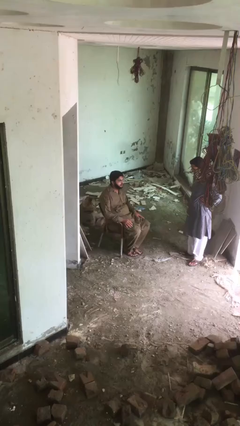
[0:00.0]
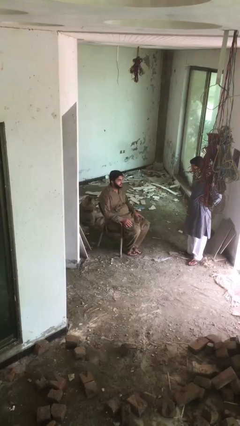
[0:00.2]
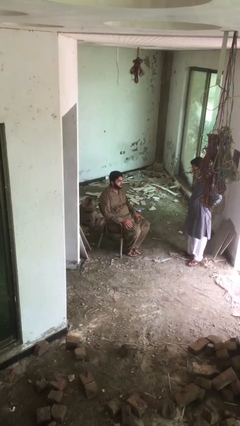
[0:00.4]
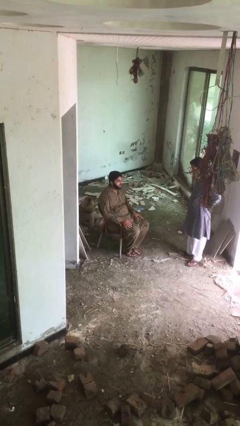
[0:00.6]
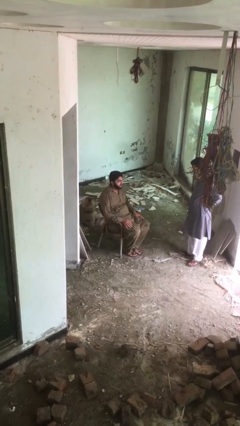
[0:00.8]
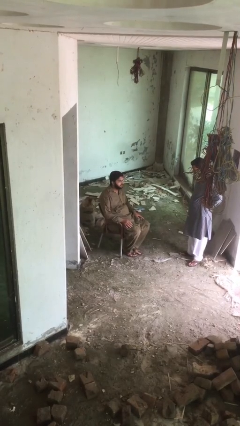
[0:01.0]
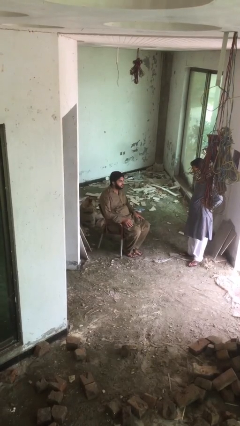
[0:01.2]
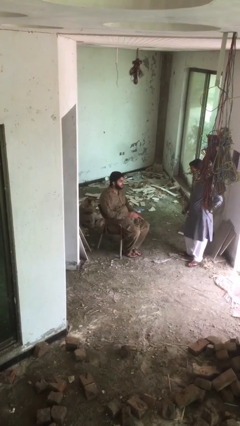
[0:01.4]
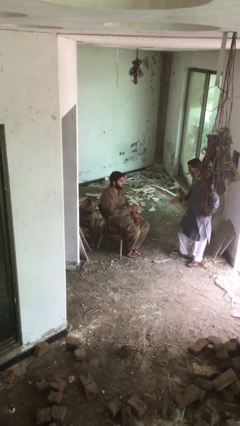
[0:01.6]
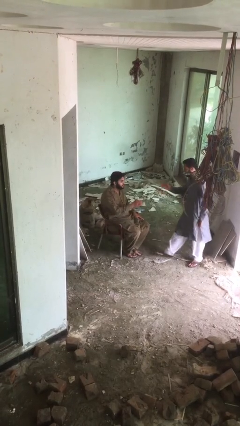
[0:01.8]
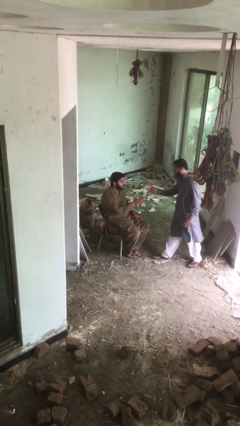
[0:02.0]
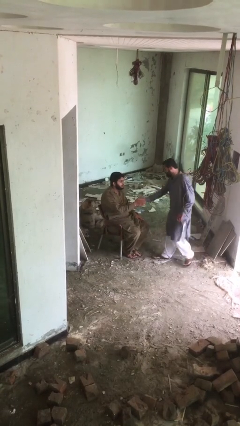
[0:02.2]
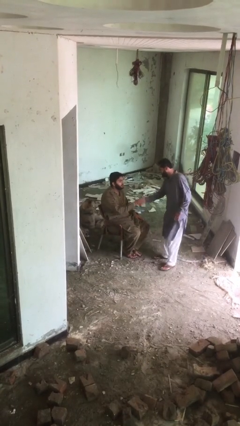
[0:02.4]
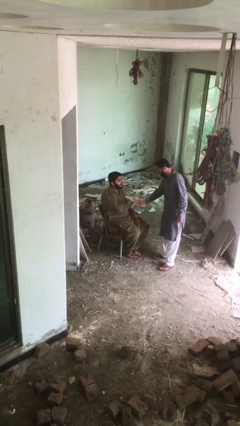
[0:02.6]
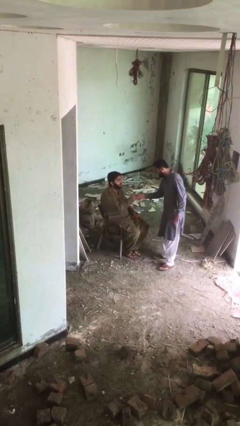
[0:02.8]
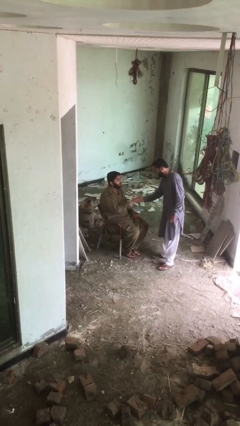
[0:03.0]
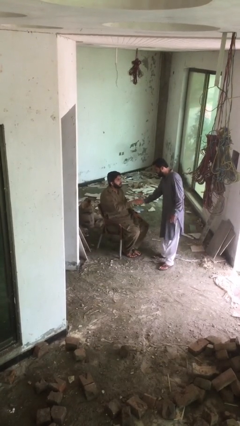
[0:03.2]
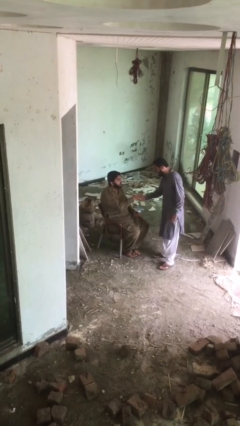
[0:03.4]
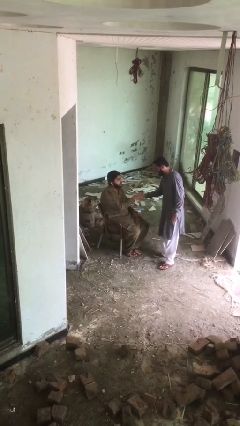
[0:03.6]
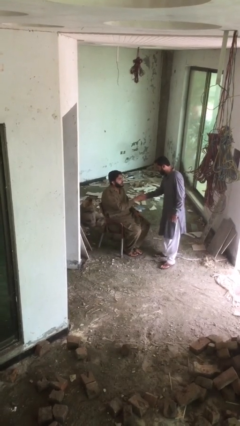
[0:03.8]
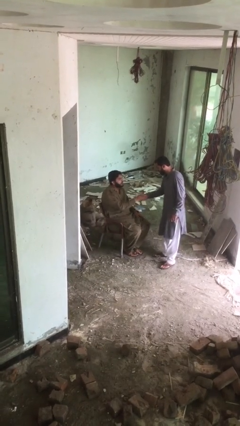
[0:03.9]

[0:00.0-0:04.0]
person shakes hand

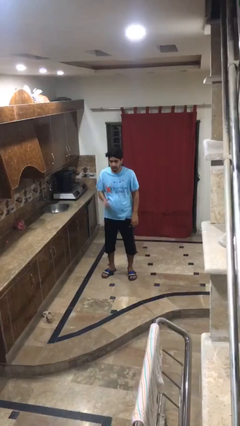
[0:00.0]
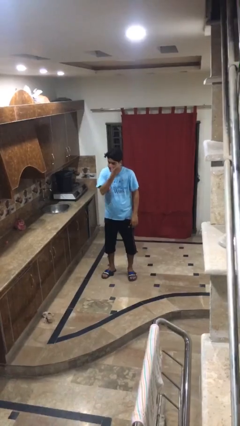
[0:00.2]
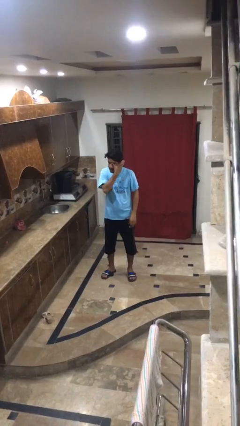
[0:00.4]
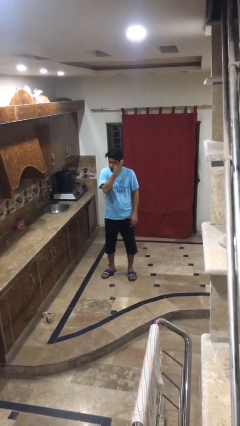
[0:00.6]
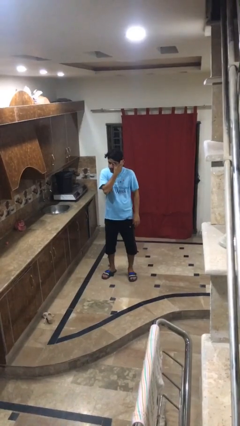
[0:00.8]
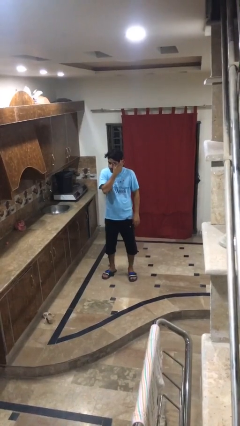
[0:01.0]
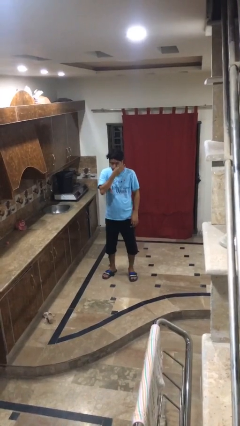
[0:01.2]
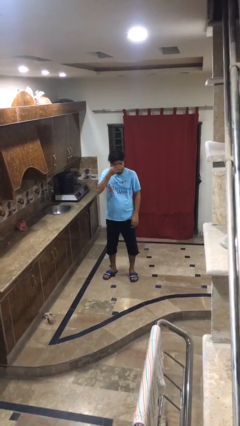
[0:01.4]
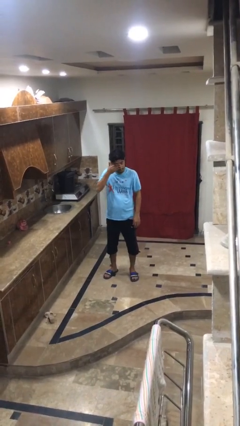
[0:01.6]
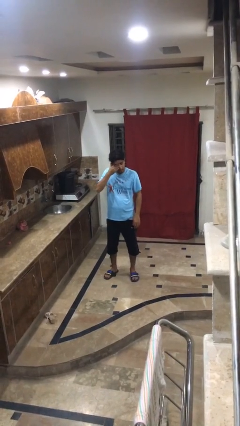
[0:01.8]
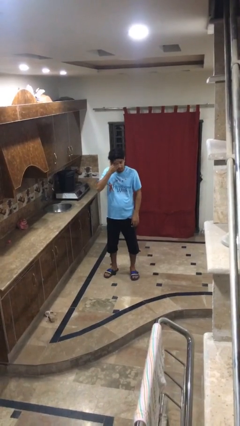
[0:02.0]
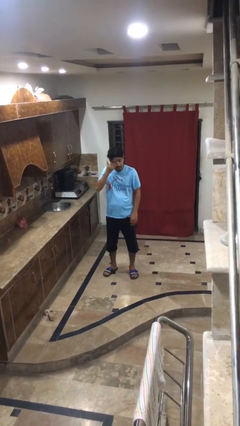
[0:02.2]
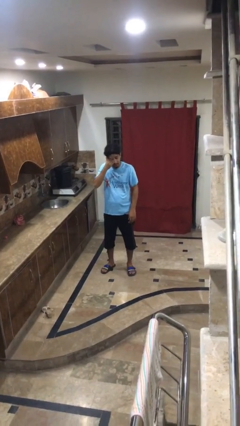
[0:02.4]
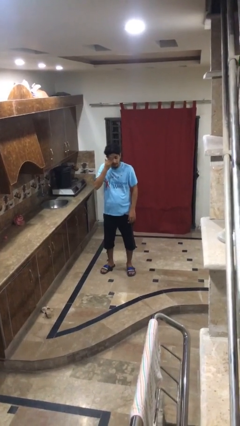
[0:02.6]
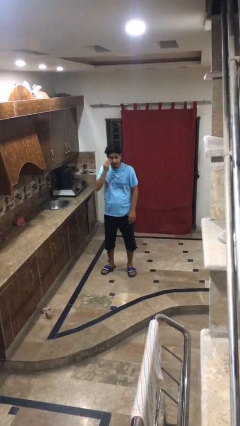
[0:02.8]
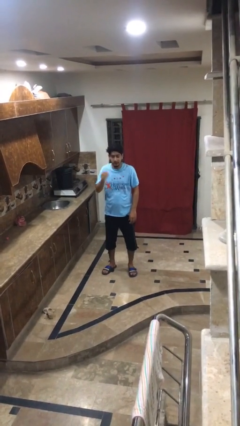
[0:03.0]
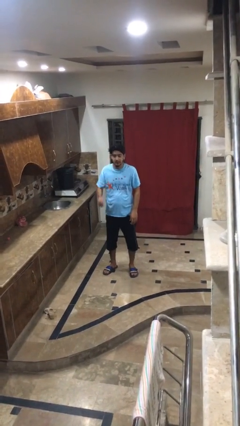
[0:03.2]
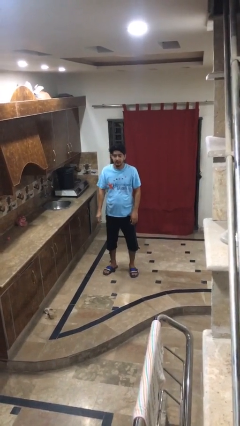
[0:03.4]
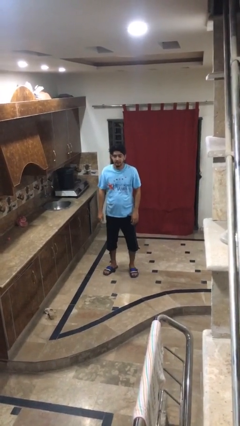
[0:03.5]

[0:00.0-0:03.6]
person rubs eyes

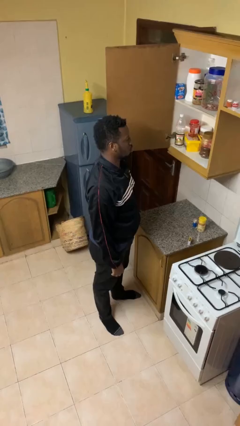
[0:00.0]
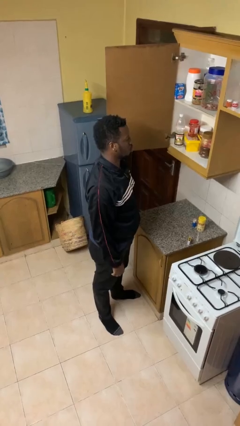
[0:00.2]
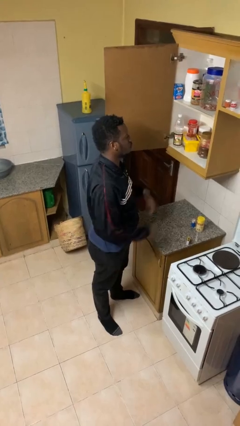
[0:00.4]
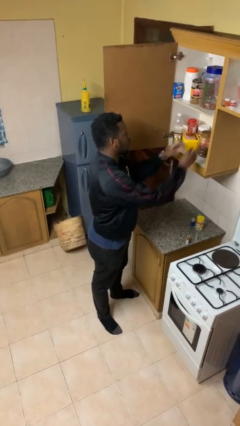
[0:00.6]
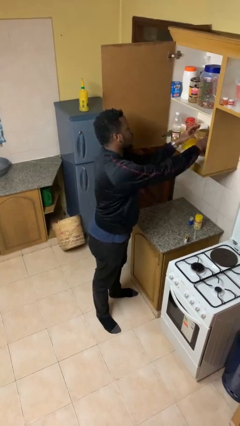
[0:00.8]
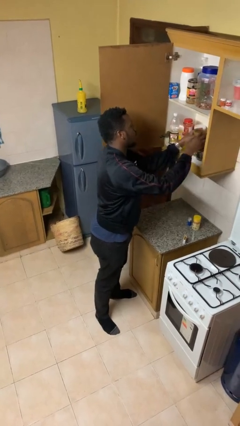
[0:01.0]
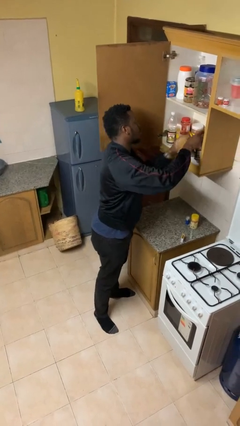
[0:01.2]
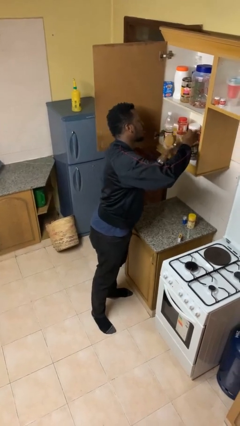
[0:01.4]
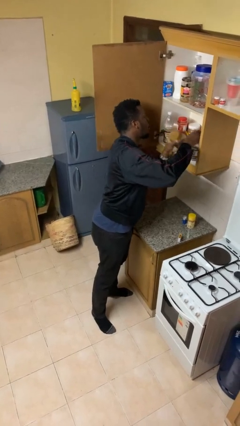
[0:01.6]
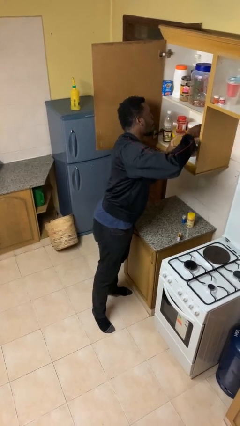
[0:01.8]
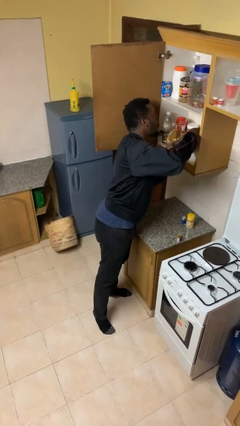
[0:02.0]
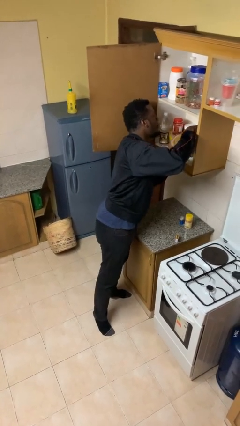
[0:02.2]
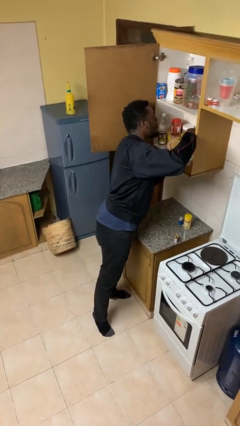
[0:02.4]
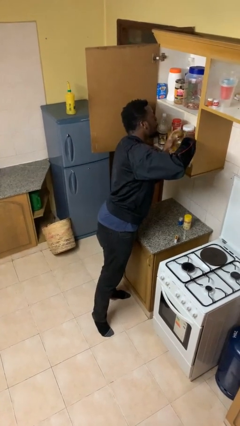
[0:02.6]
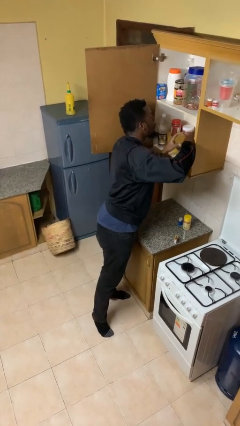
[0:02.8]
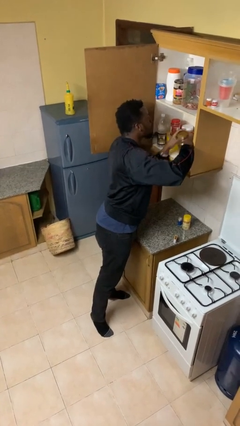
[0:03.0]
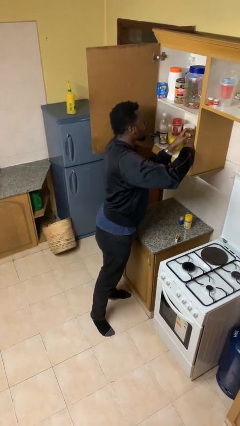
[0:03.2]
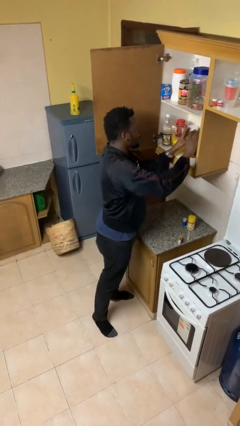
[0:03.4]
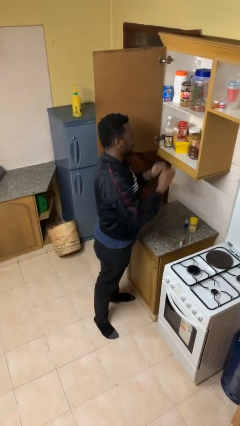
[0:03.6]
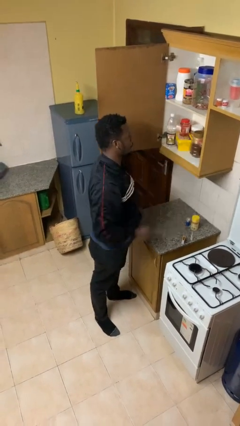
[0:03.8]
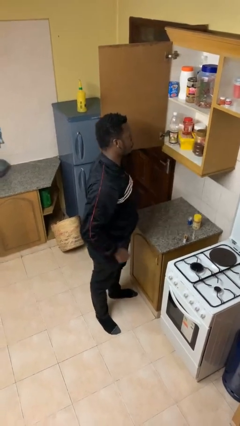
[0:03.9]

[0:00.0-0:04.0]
person searches in cabinet

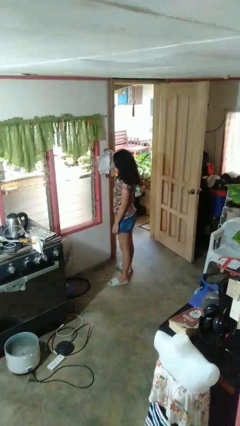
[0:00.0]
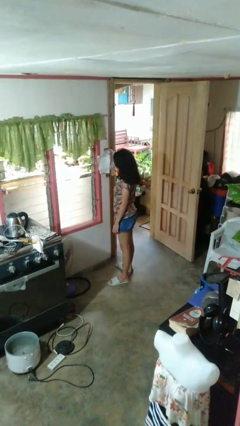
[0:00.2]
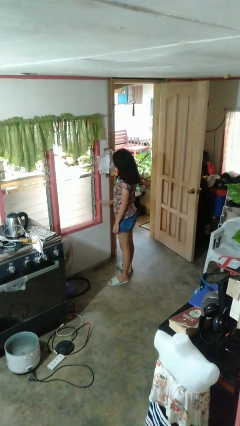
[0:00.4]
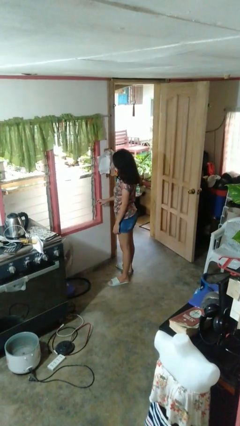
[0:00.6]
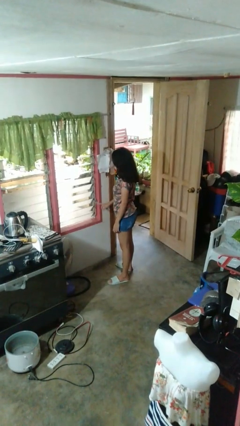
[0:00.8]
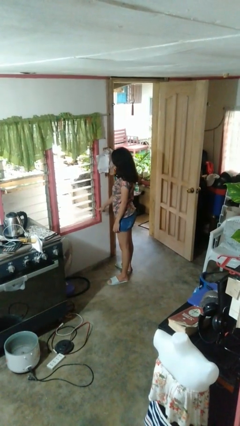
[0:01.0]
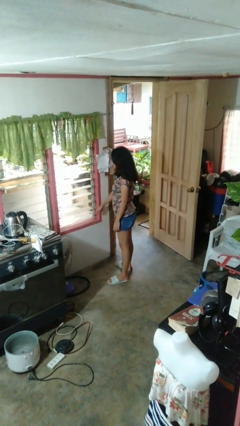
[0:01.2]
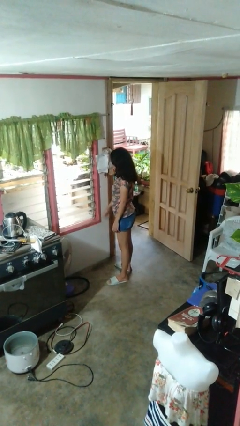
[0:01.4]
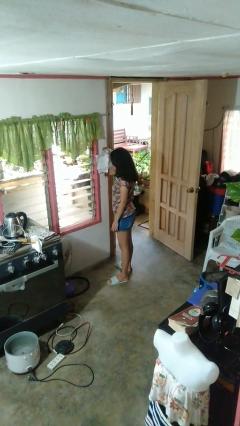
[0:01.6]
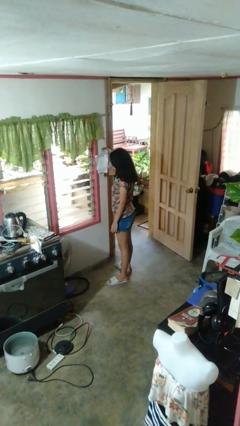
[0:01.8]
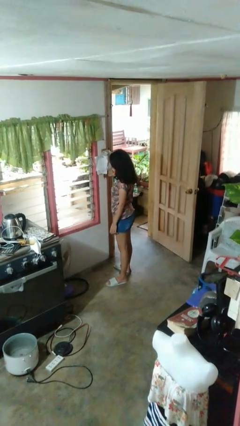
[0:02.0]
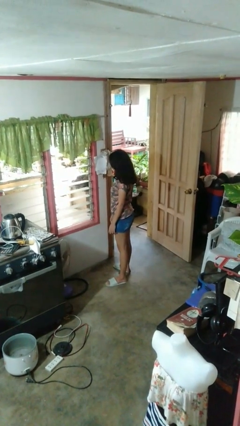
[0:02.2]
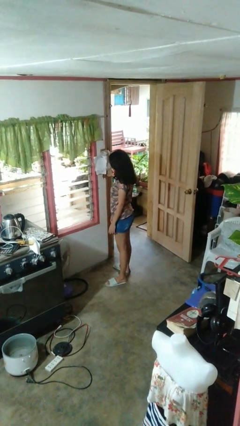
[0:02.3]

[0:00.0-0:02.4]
person opens home window

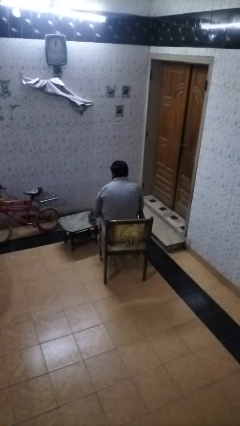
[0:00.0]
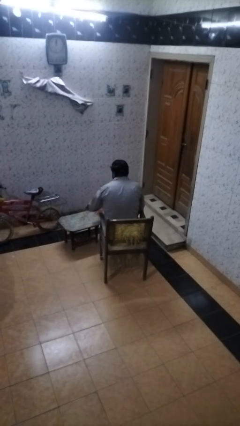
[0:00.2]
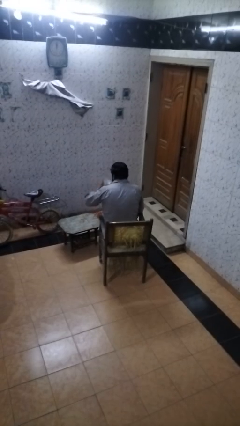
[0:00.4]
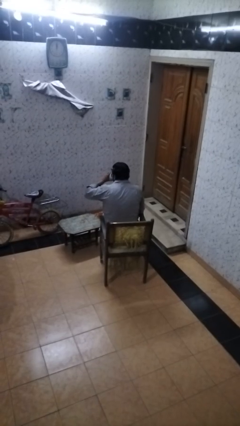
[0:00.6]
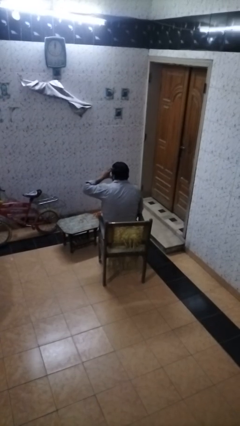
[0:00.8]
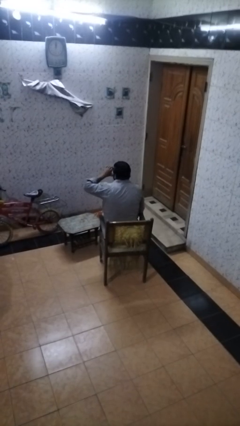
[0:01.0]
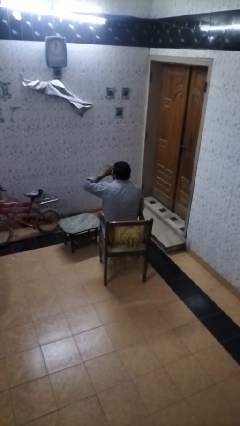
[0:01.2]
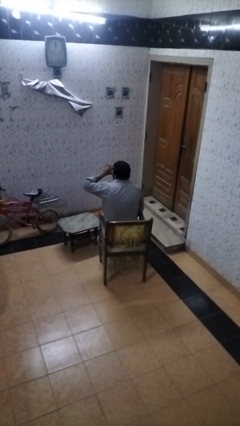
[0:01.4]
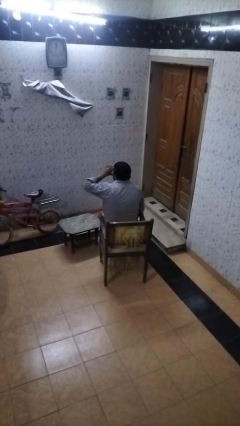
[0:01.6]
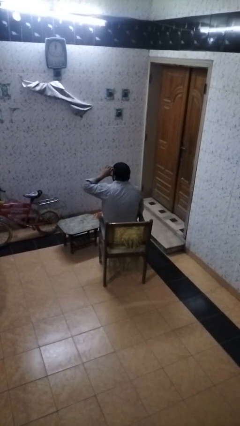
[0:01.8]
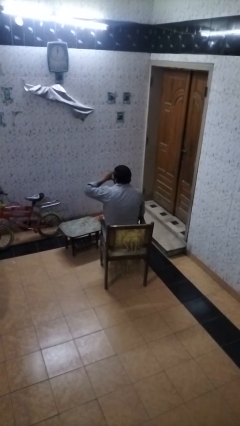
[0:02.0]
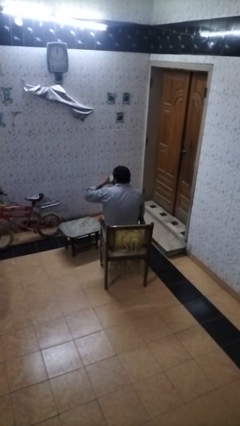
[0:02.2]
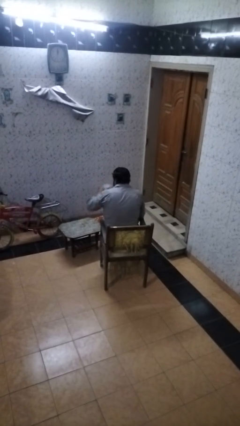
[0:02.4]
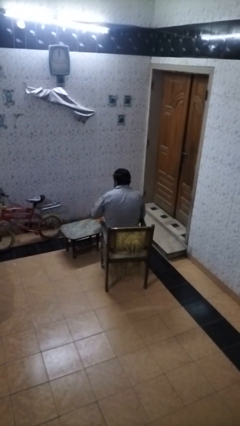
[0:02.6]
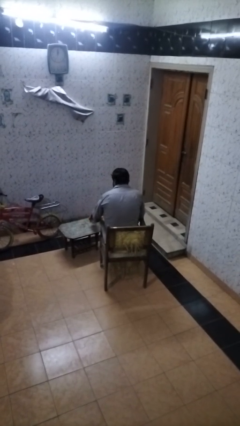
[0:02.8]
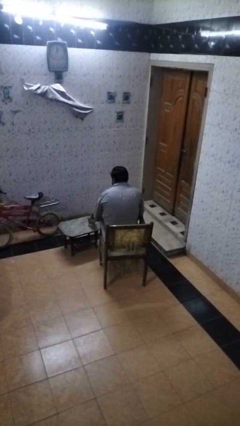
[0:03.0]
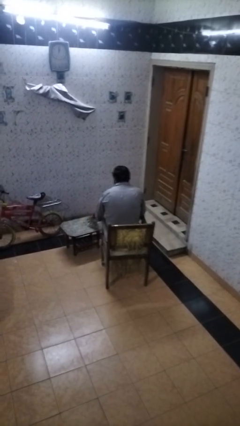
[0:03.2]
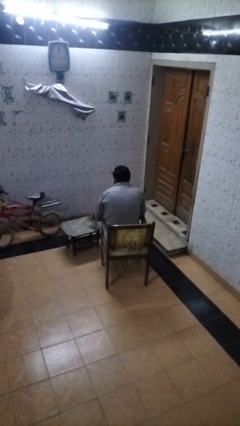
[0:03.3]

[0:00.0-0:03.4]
person drinks from cup
